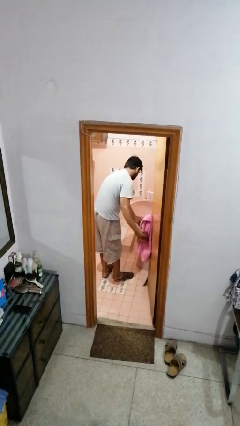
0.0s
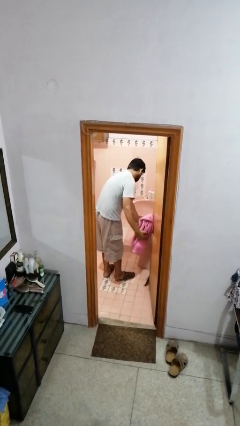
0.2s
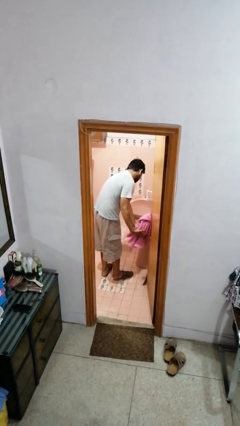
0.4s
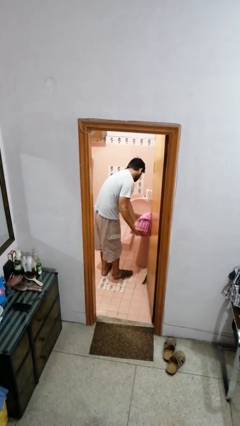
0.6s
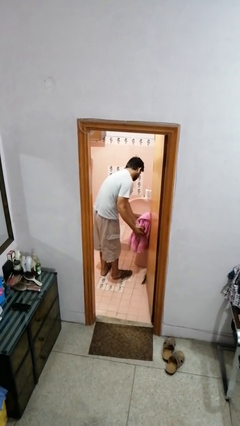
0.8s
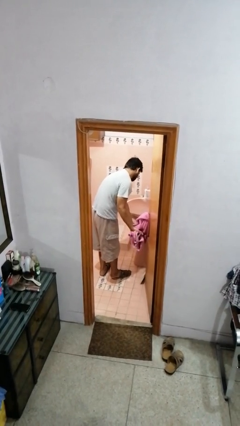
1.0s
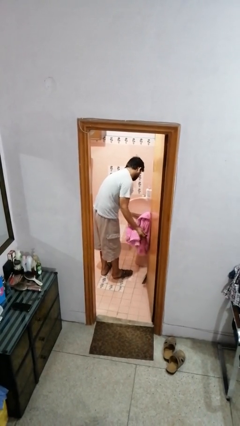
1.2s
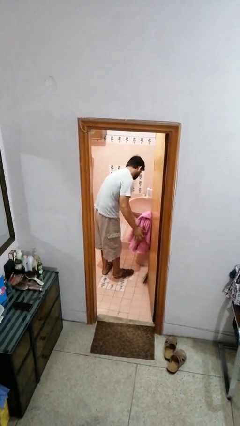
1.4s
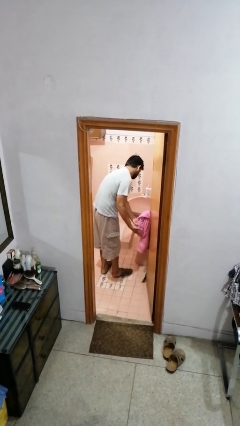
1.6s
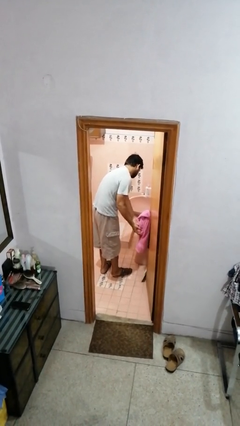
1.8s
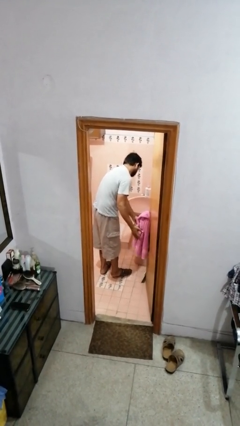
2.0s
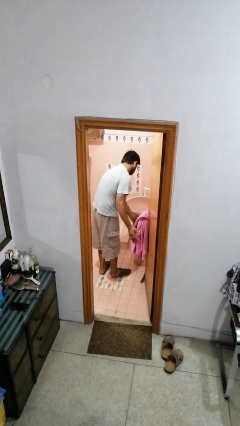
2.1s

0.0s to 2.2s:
person dries hands with towel

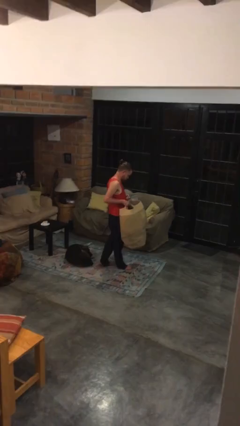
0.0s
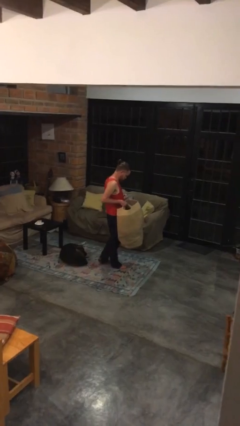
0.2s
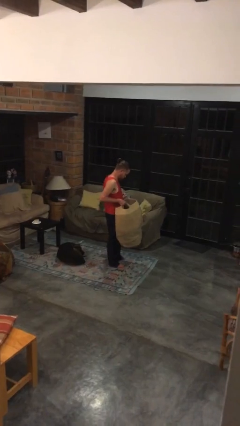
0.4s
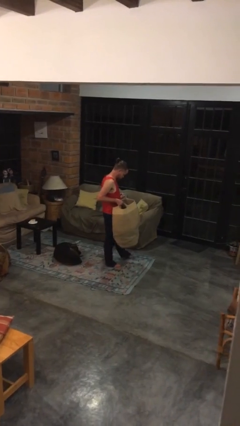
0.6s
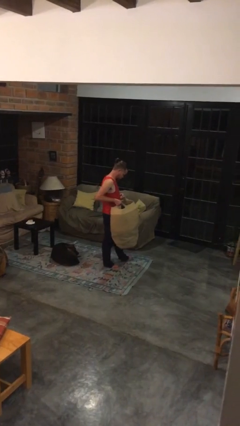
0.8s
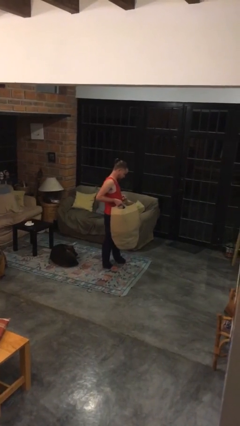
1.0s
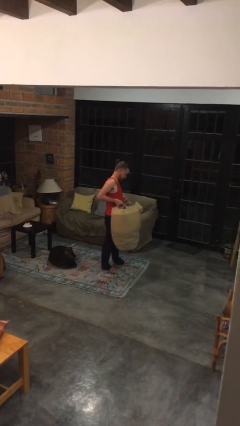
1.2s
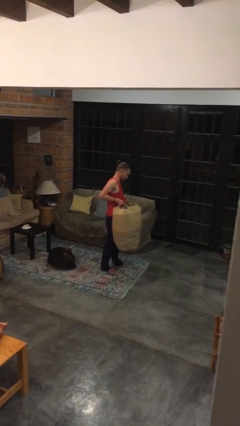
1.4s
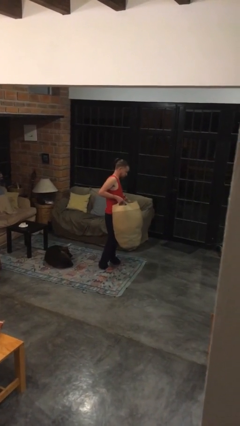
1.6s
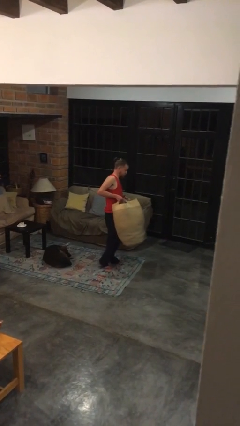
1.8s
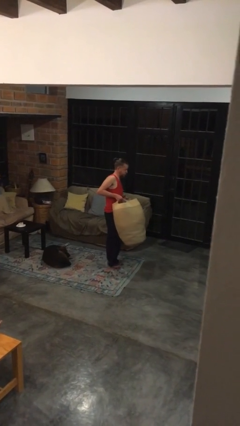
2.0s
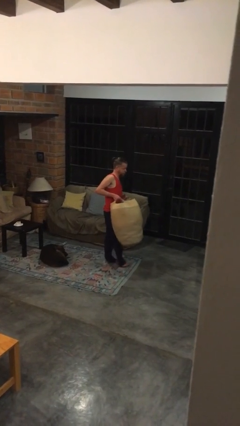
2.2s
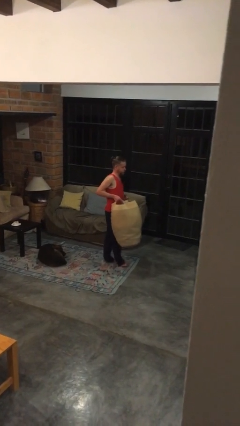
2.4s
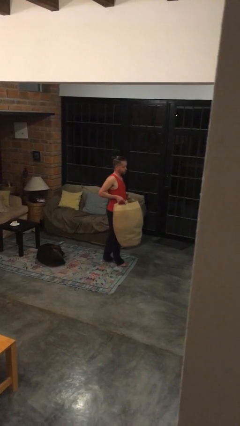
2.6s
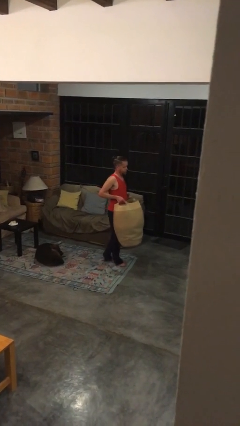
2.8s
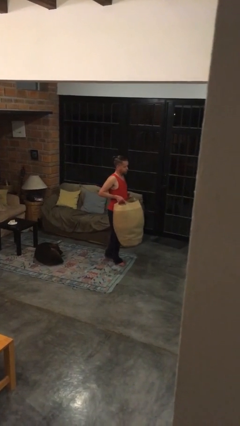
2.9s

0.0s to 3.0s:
person carries laundry basket

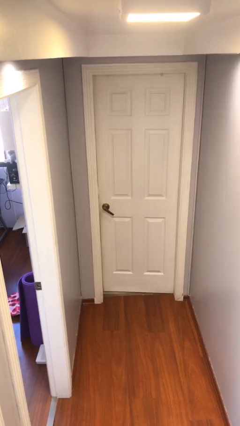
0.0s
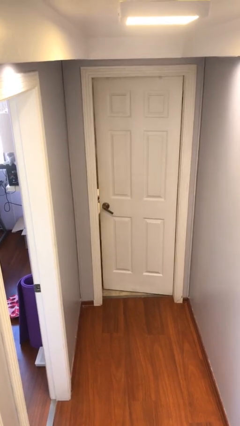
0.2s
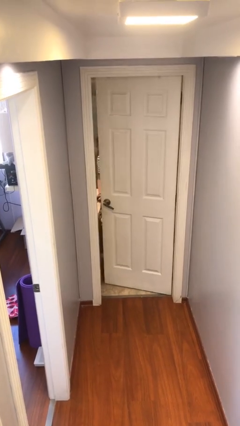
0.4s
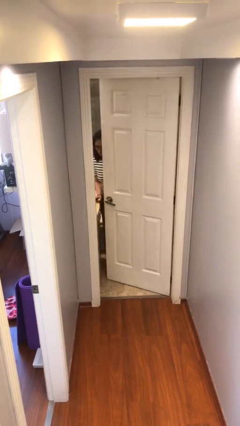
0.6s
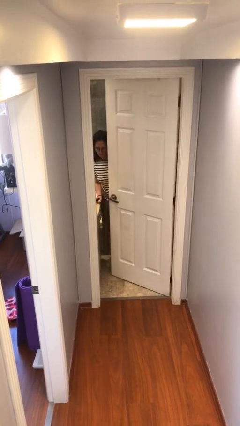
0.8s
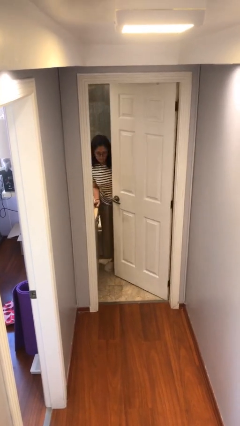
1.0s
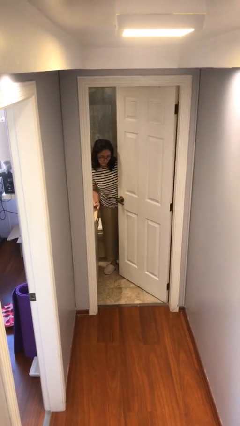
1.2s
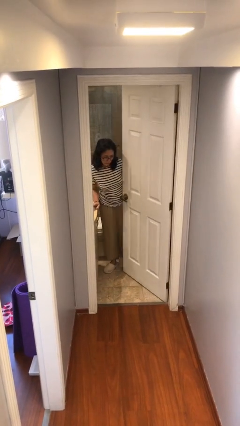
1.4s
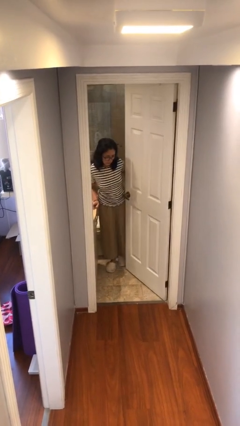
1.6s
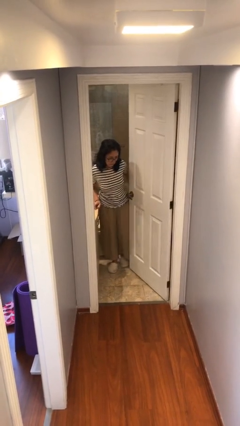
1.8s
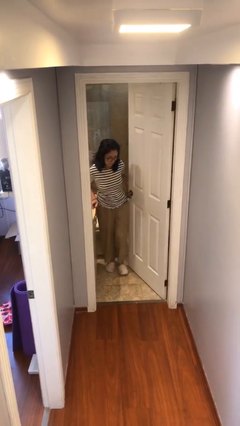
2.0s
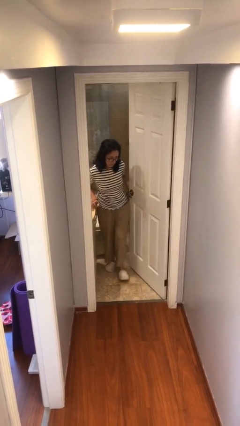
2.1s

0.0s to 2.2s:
person opens facility door

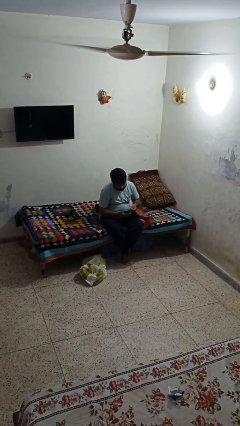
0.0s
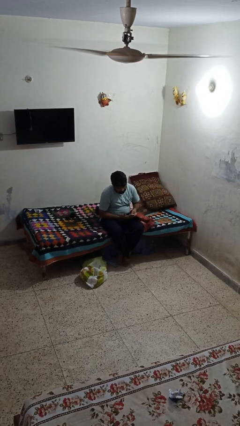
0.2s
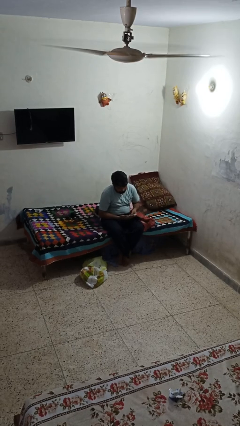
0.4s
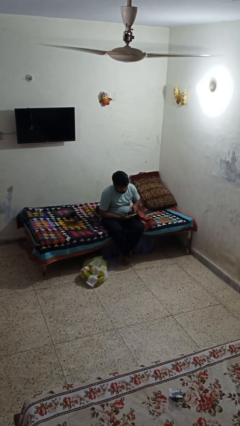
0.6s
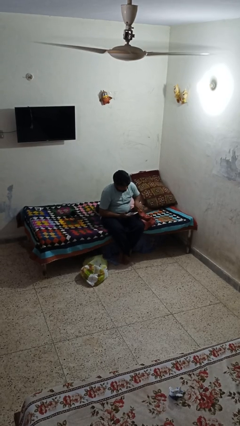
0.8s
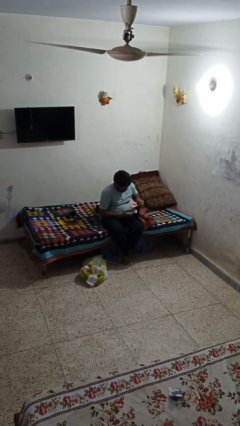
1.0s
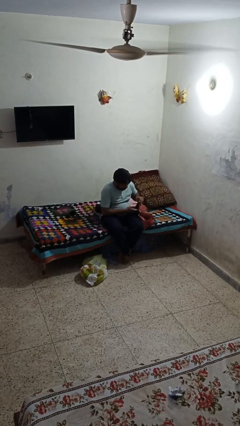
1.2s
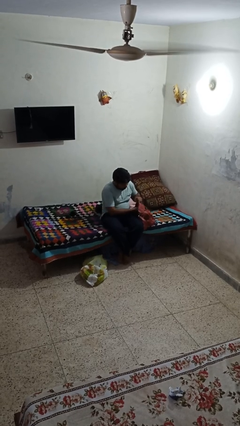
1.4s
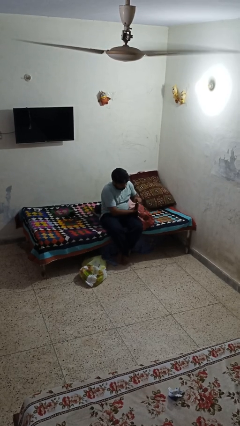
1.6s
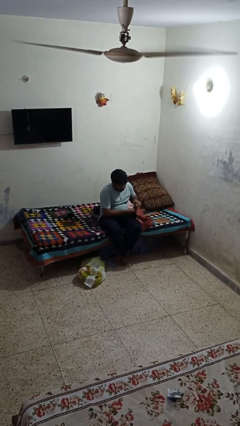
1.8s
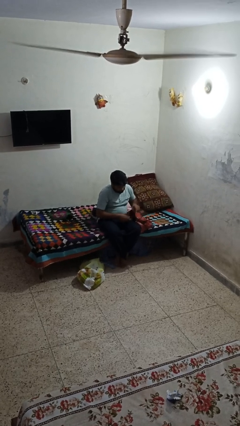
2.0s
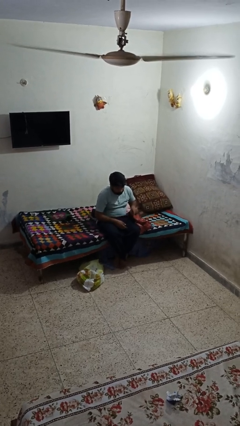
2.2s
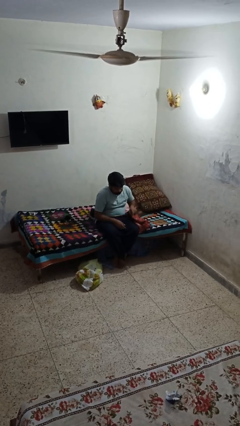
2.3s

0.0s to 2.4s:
person takes object from purse

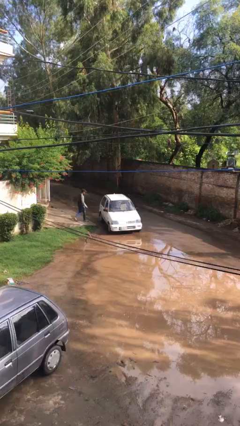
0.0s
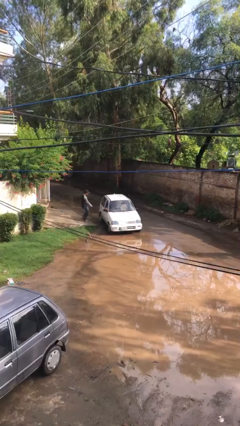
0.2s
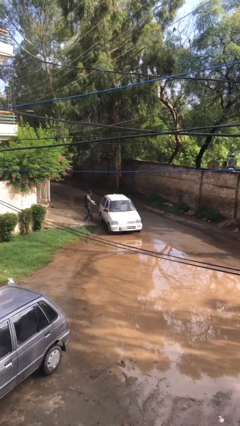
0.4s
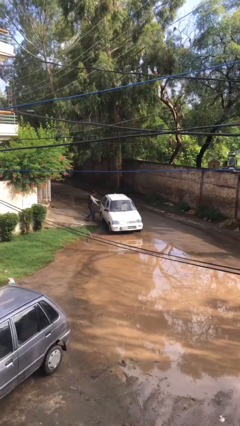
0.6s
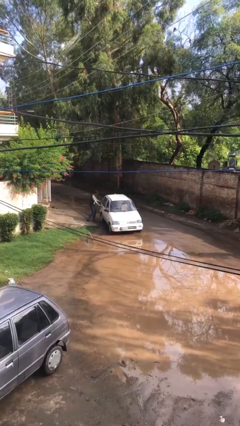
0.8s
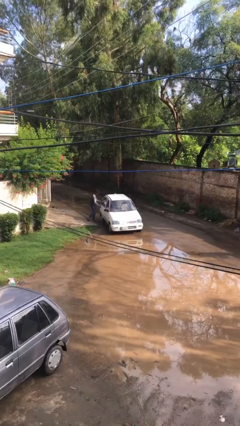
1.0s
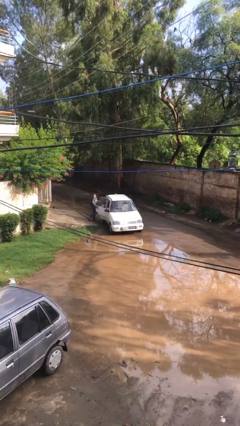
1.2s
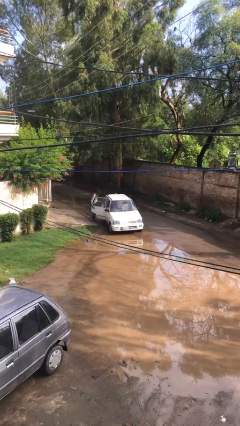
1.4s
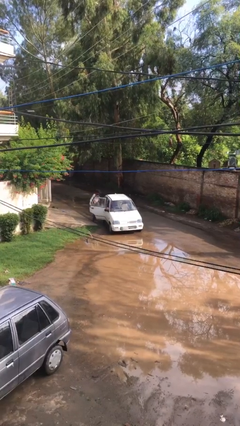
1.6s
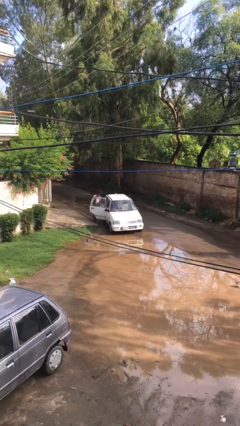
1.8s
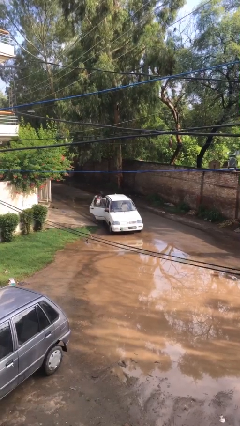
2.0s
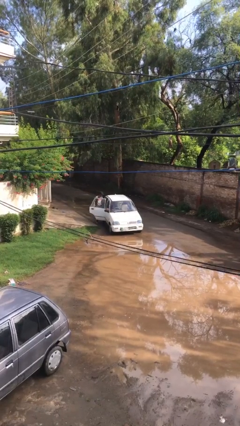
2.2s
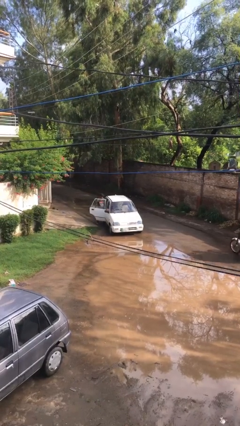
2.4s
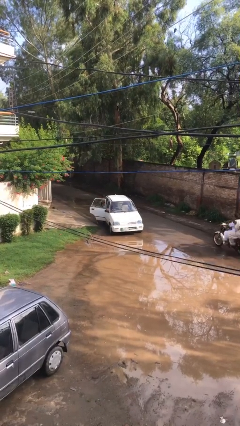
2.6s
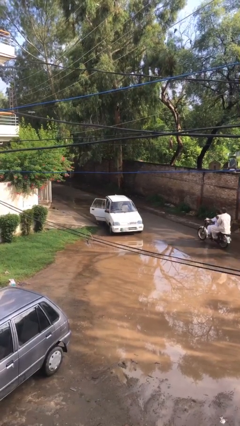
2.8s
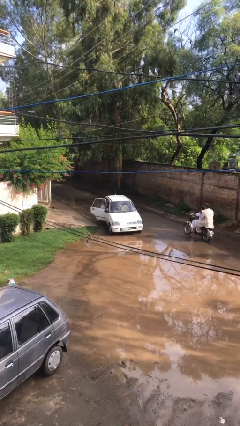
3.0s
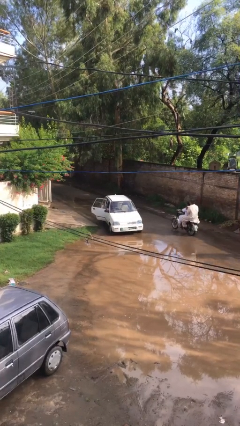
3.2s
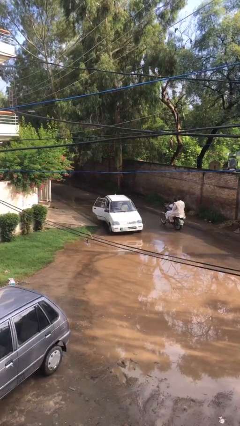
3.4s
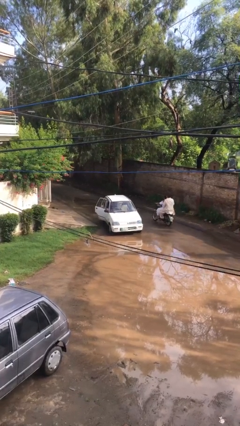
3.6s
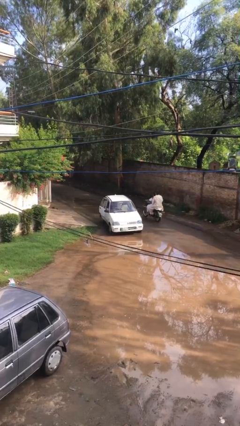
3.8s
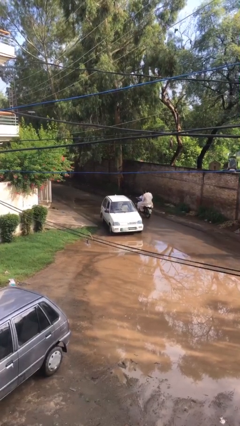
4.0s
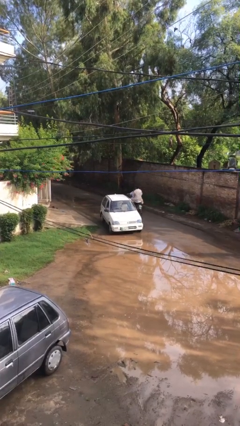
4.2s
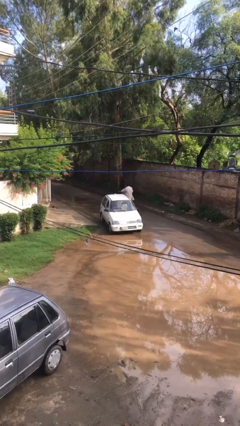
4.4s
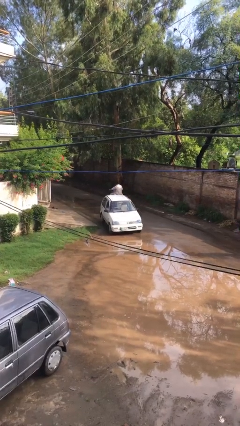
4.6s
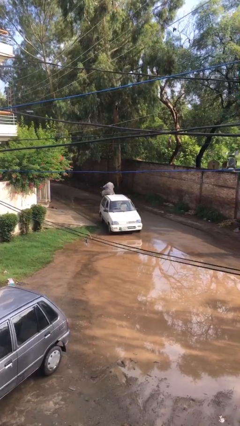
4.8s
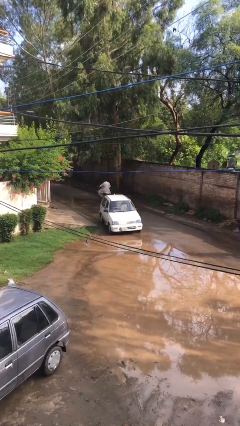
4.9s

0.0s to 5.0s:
car picks up person

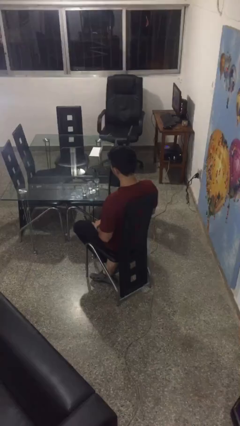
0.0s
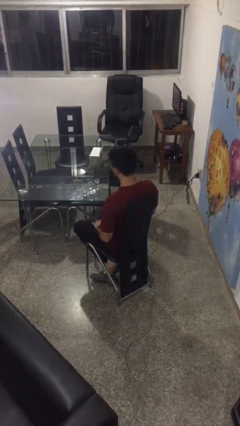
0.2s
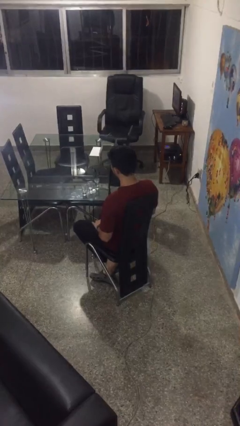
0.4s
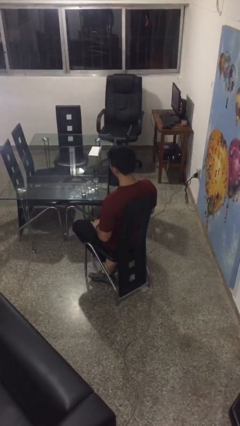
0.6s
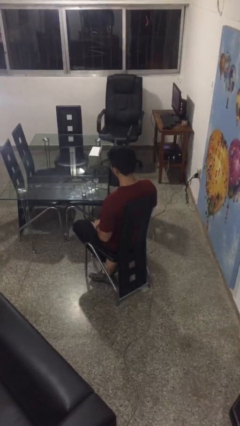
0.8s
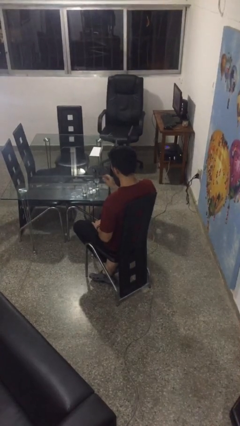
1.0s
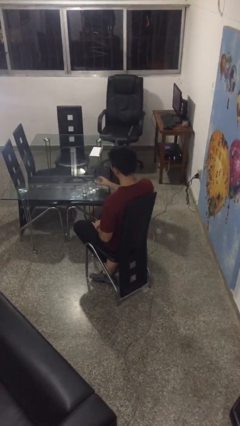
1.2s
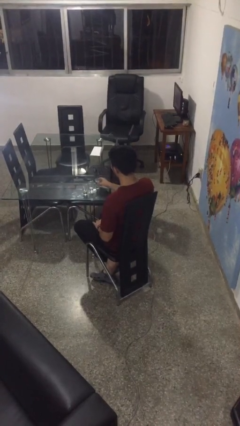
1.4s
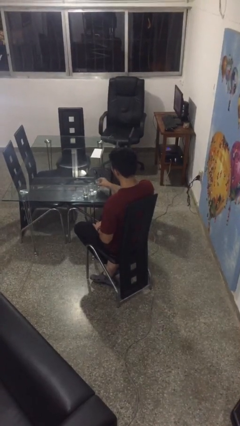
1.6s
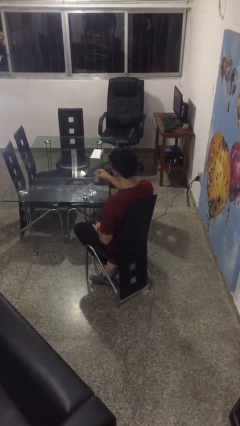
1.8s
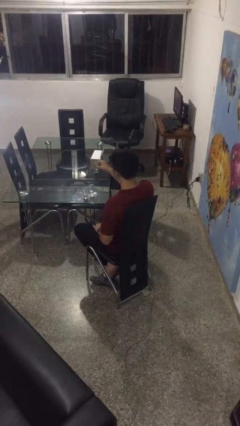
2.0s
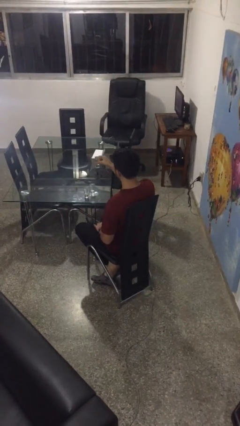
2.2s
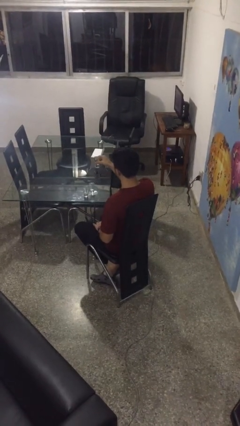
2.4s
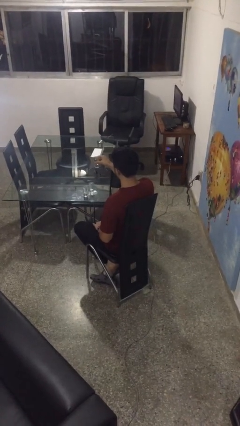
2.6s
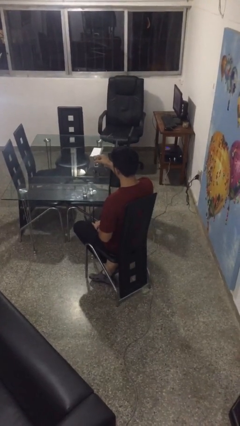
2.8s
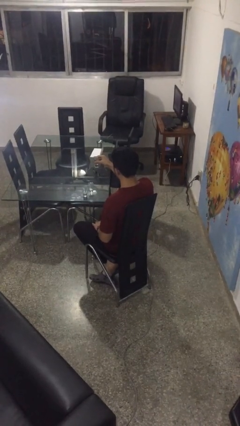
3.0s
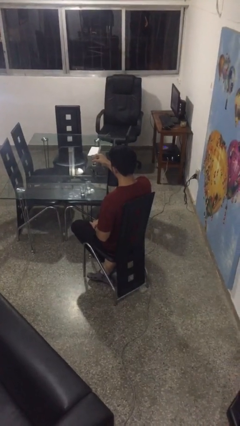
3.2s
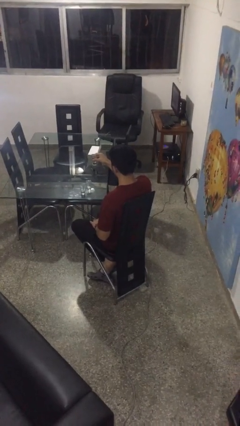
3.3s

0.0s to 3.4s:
person picks up object from table
